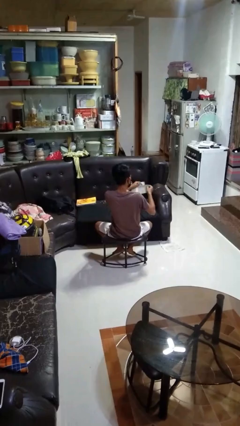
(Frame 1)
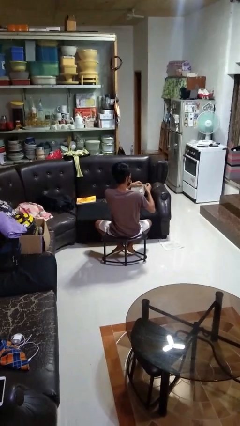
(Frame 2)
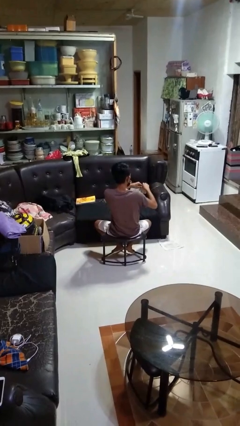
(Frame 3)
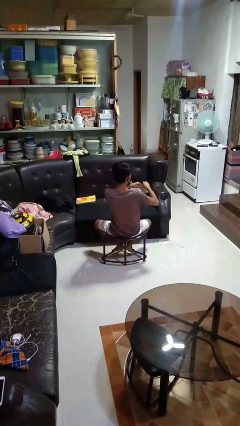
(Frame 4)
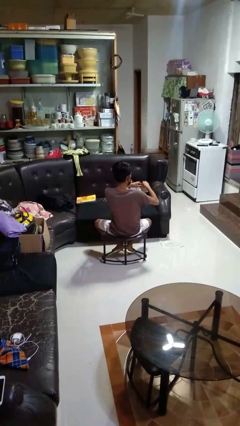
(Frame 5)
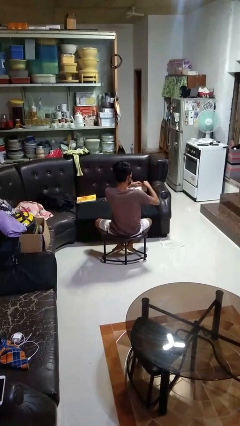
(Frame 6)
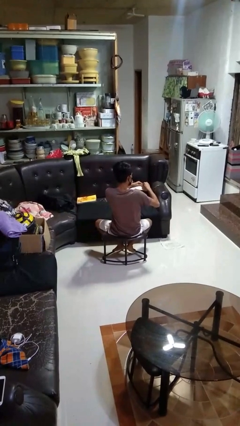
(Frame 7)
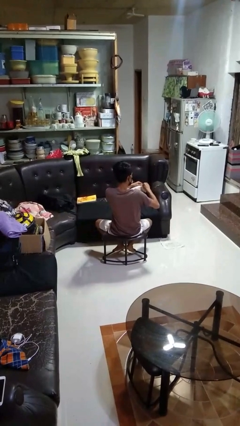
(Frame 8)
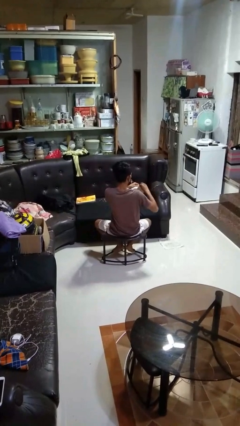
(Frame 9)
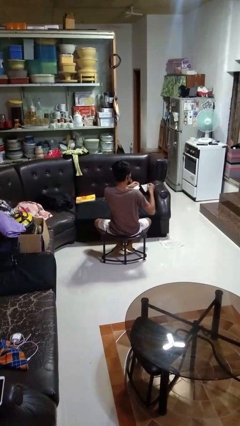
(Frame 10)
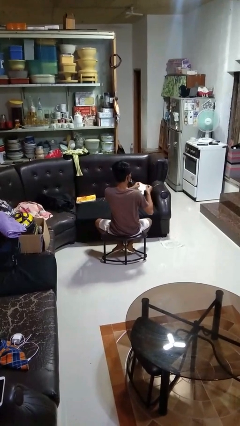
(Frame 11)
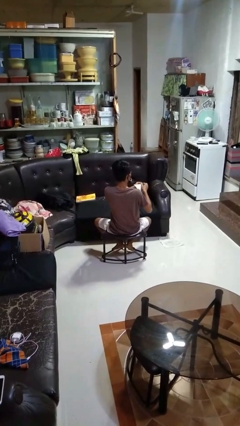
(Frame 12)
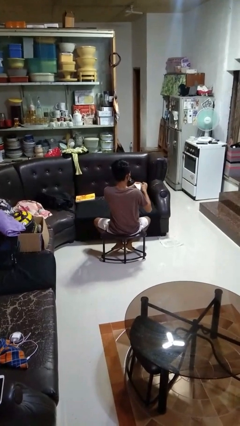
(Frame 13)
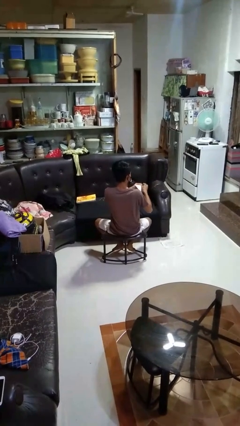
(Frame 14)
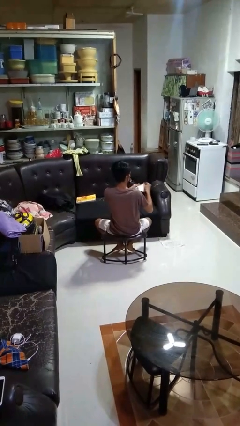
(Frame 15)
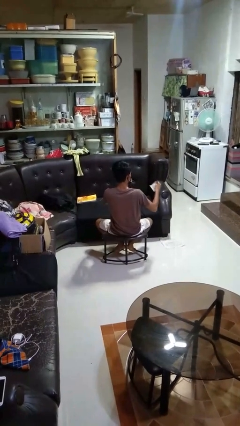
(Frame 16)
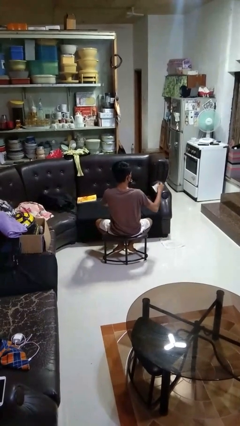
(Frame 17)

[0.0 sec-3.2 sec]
person tears paper

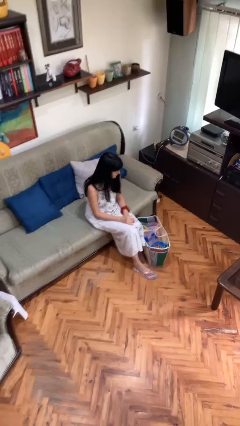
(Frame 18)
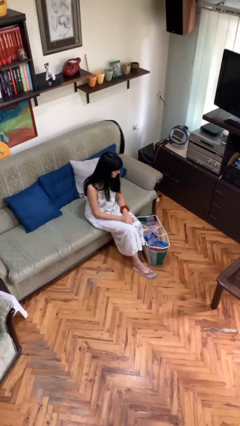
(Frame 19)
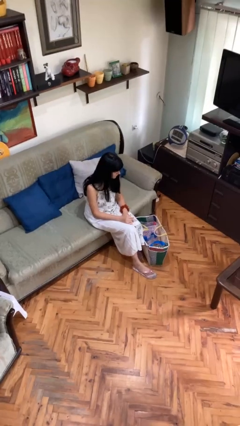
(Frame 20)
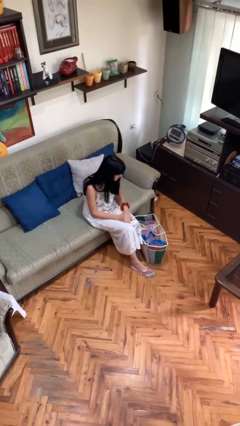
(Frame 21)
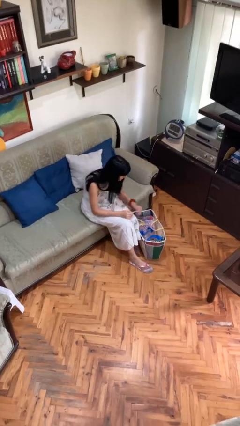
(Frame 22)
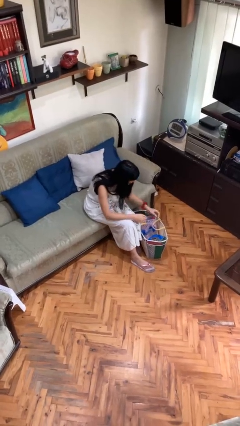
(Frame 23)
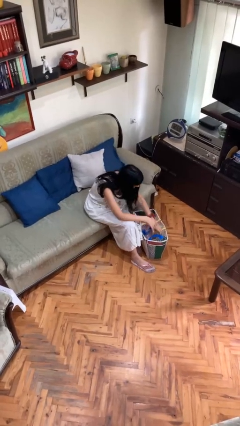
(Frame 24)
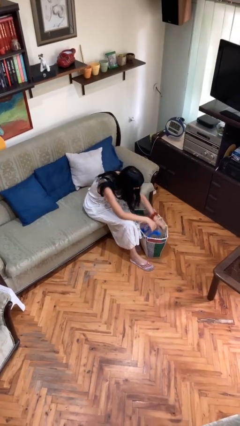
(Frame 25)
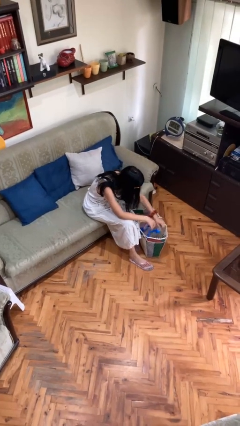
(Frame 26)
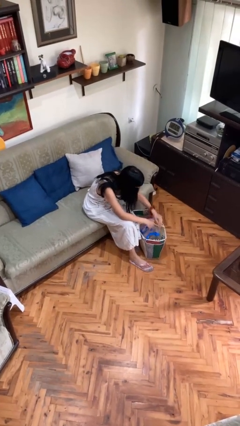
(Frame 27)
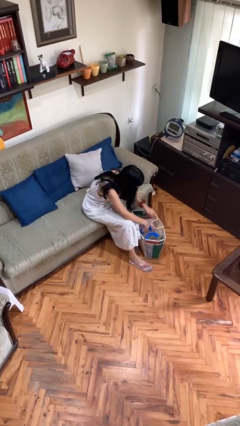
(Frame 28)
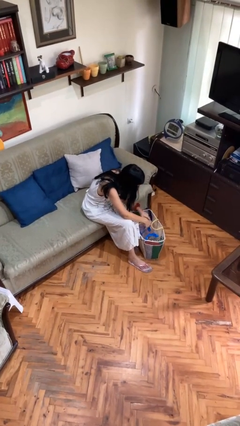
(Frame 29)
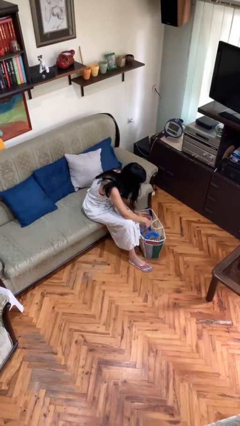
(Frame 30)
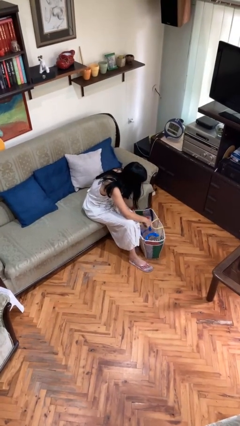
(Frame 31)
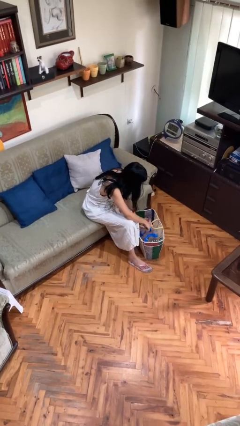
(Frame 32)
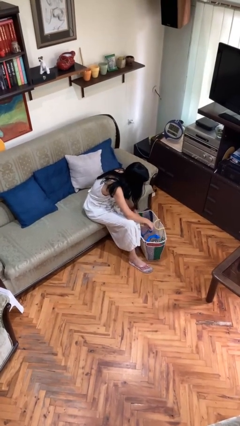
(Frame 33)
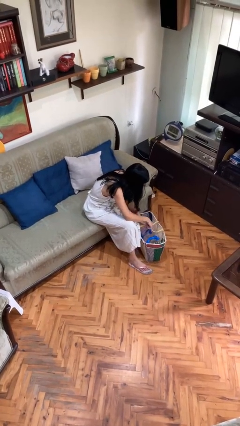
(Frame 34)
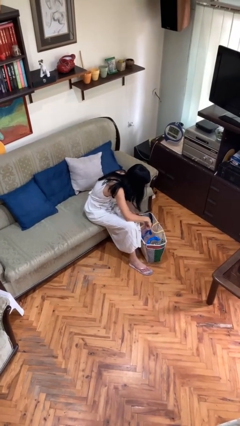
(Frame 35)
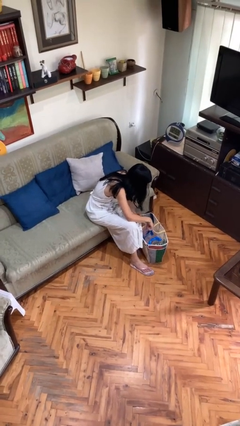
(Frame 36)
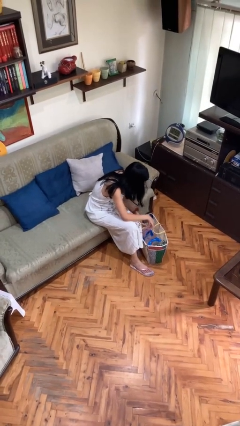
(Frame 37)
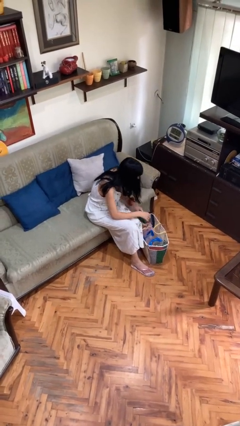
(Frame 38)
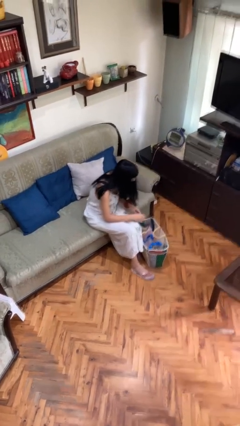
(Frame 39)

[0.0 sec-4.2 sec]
person searches in bag

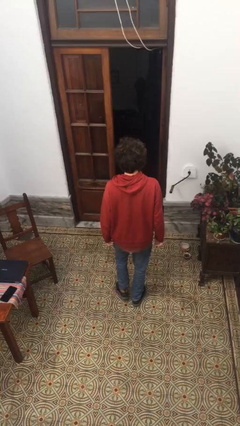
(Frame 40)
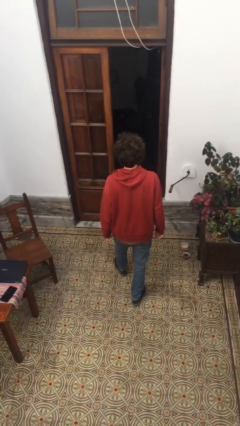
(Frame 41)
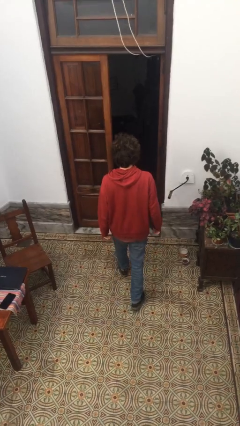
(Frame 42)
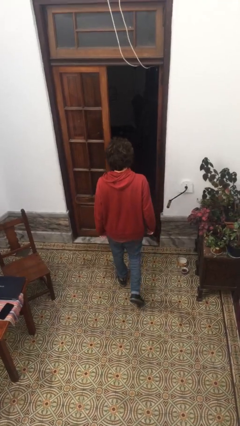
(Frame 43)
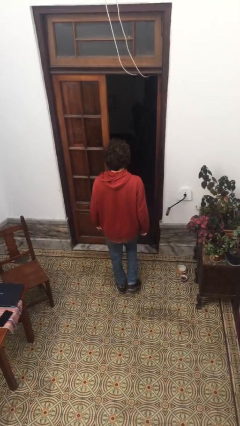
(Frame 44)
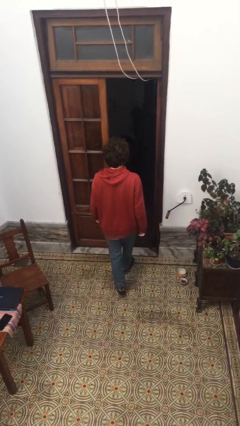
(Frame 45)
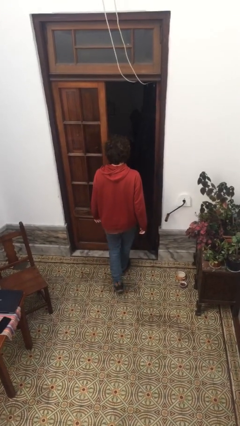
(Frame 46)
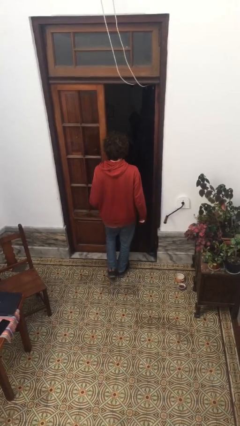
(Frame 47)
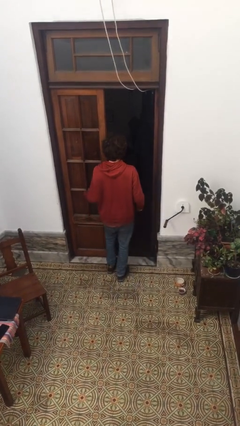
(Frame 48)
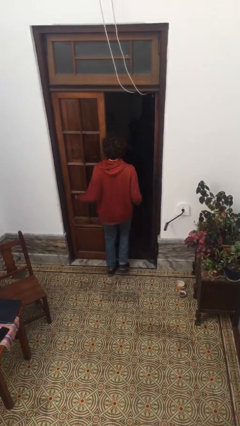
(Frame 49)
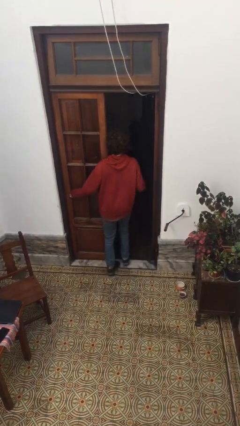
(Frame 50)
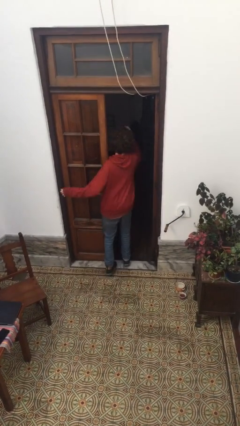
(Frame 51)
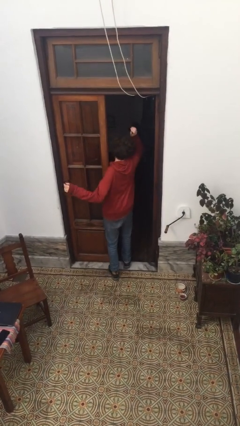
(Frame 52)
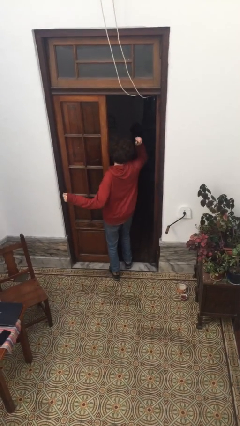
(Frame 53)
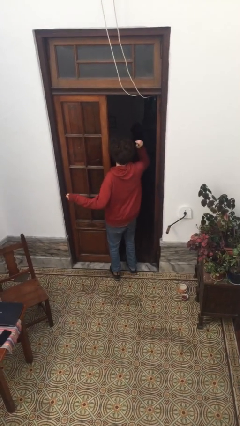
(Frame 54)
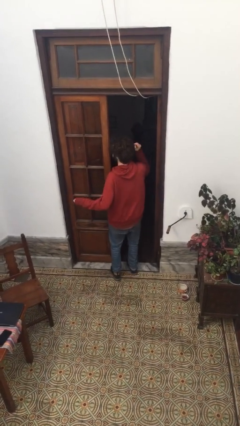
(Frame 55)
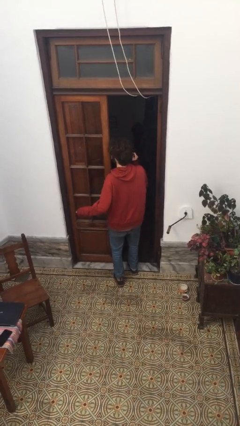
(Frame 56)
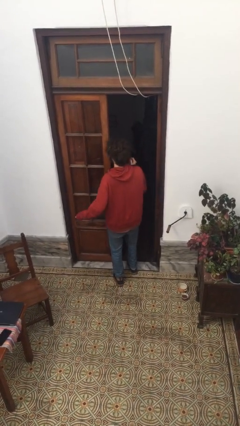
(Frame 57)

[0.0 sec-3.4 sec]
person bumps into wall

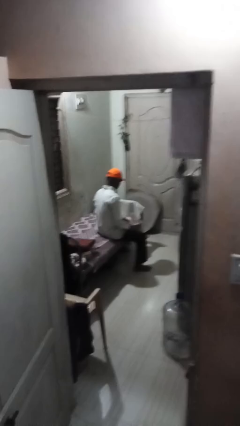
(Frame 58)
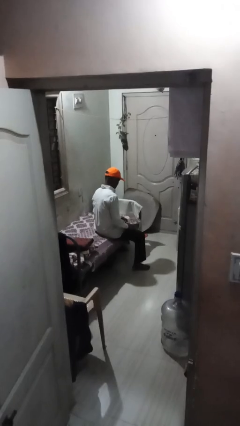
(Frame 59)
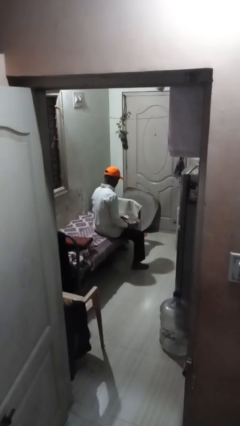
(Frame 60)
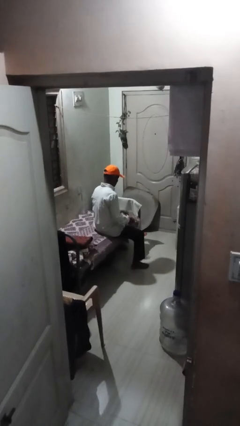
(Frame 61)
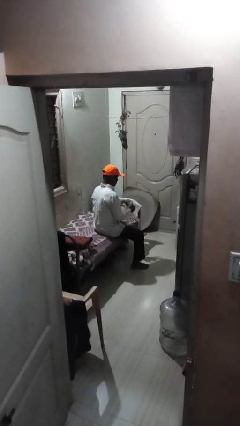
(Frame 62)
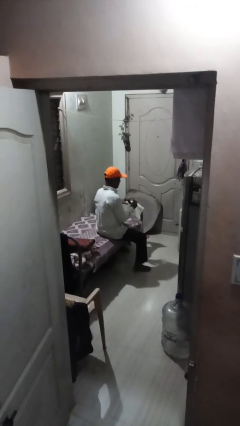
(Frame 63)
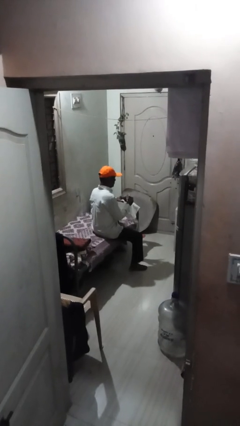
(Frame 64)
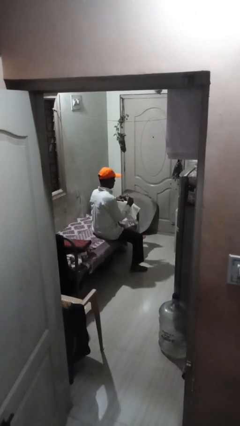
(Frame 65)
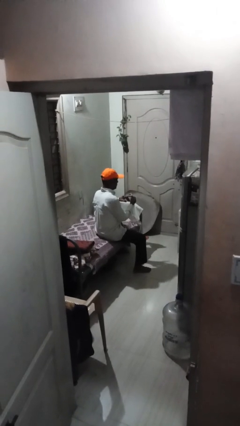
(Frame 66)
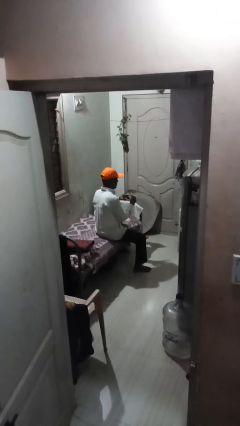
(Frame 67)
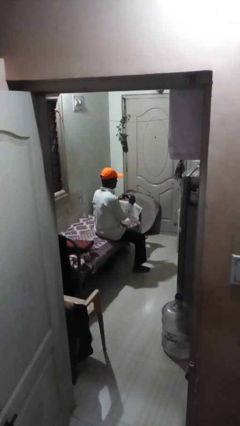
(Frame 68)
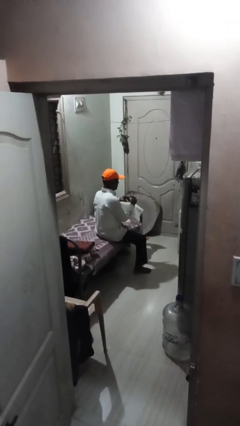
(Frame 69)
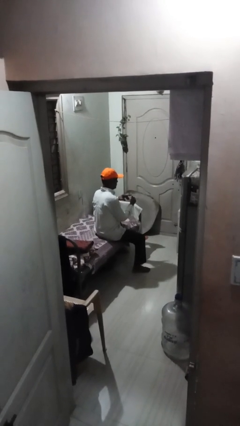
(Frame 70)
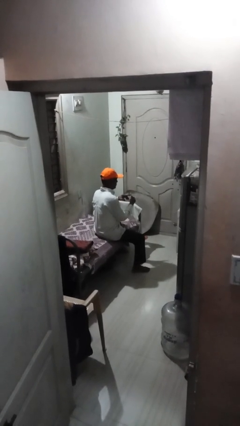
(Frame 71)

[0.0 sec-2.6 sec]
person files fingernails

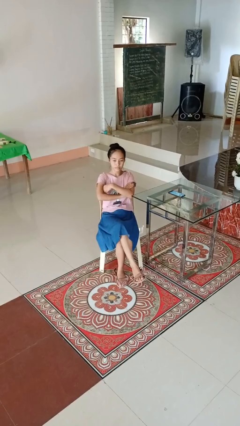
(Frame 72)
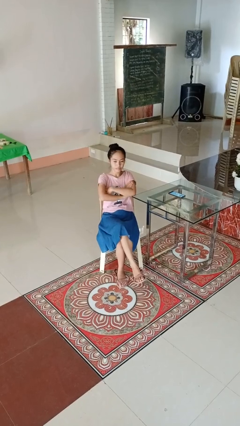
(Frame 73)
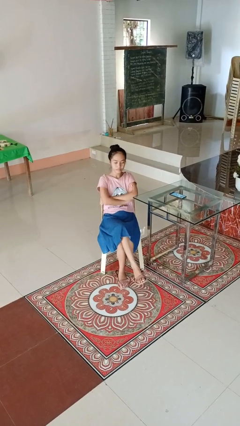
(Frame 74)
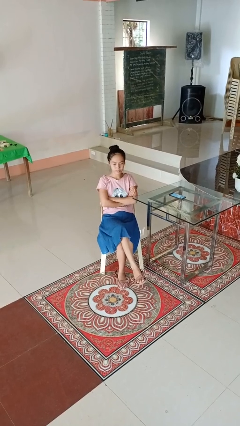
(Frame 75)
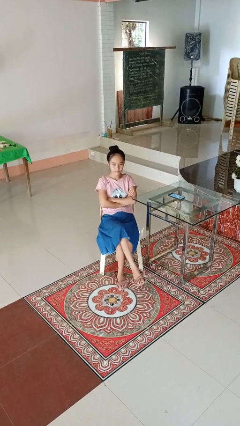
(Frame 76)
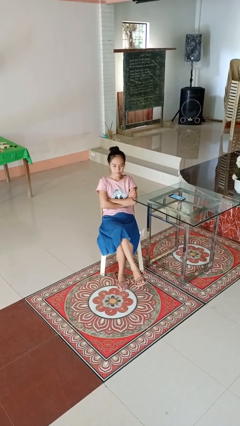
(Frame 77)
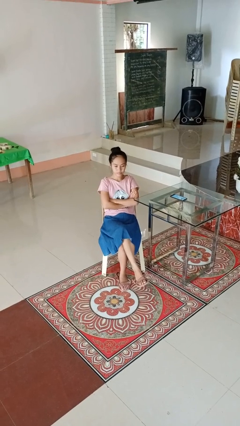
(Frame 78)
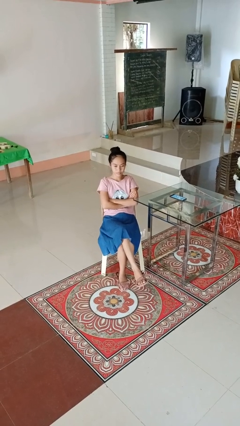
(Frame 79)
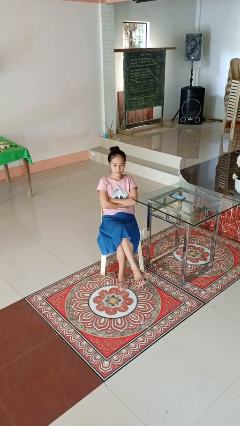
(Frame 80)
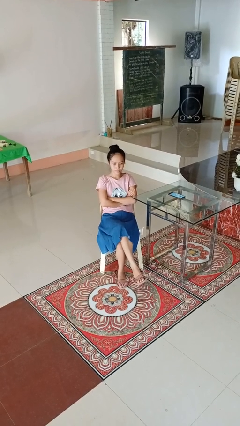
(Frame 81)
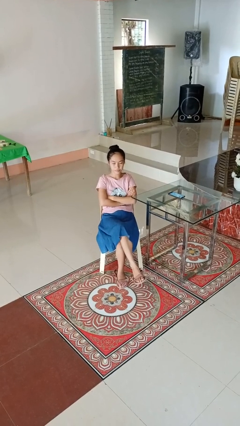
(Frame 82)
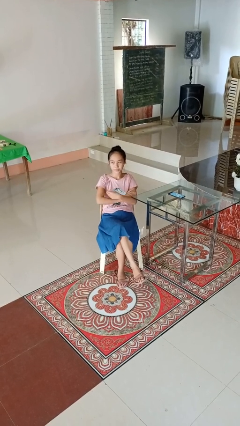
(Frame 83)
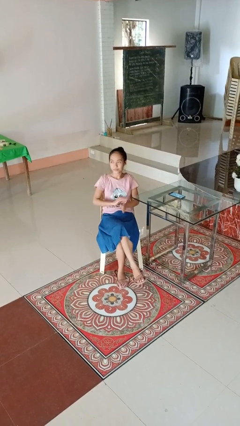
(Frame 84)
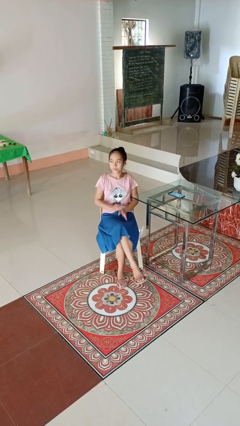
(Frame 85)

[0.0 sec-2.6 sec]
person crosses arms

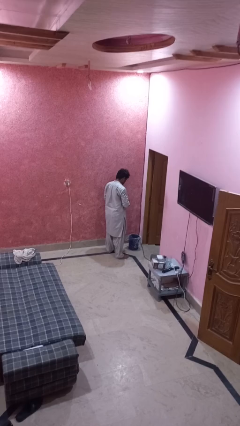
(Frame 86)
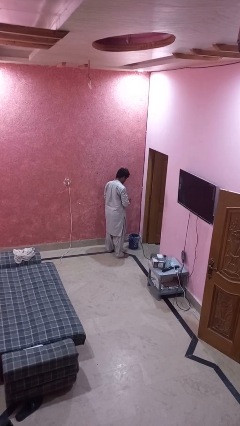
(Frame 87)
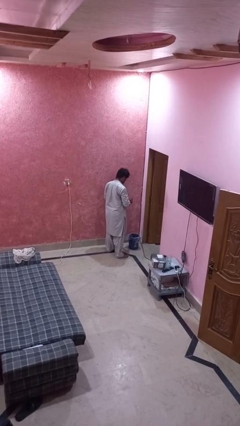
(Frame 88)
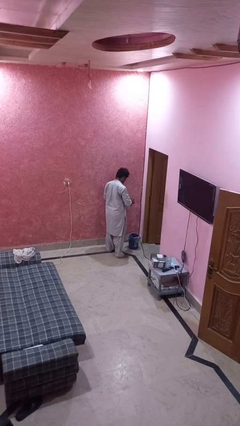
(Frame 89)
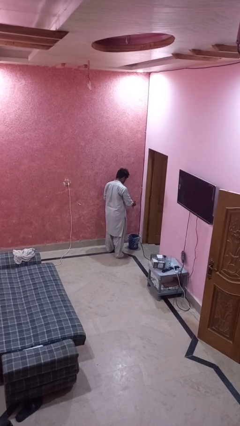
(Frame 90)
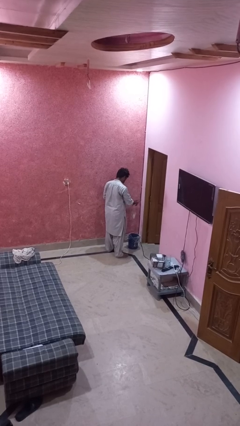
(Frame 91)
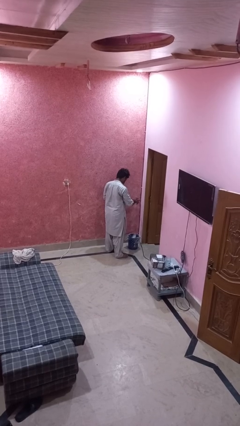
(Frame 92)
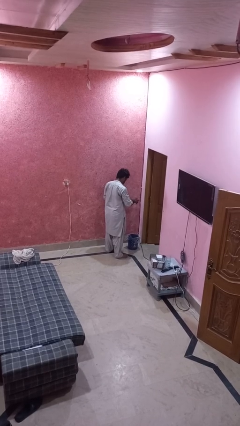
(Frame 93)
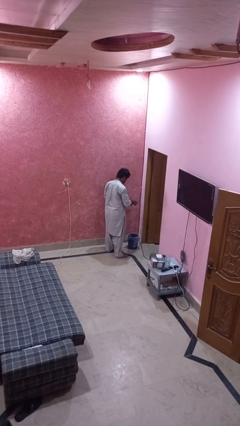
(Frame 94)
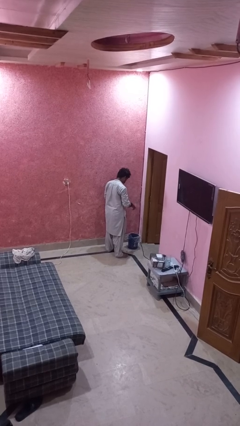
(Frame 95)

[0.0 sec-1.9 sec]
person discards trash
